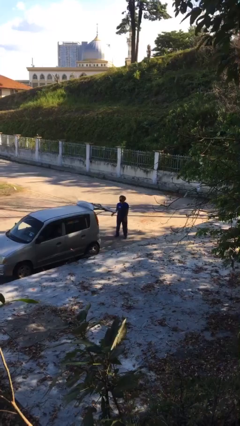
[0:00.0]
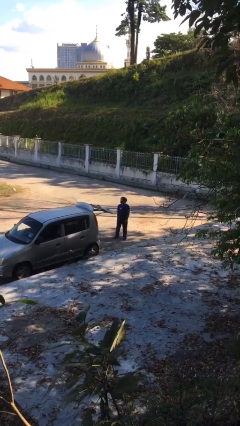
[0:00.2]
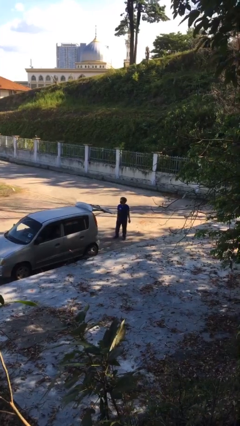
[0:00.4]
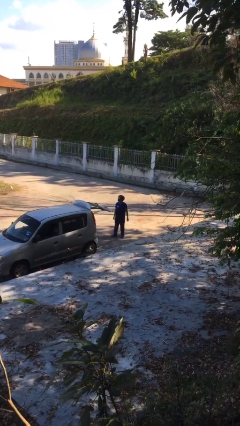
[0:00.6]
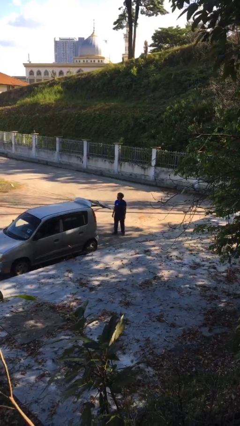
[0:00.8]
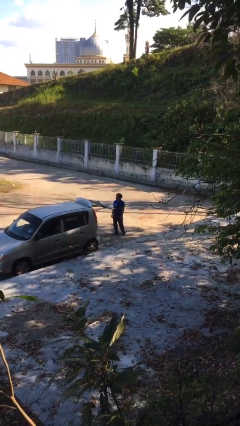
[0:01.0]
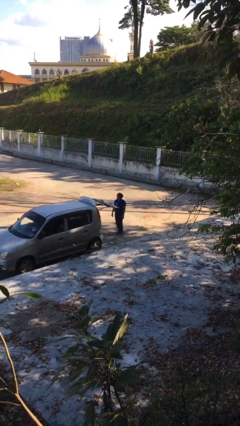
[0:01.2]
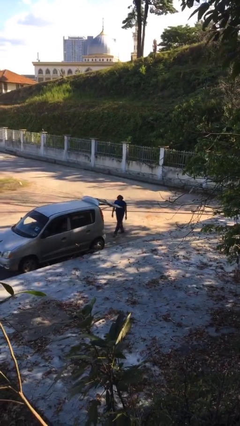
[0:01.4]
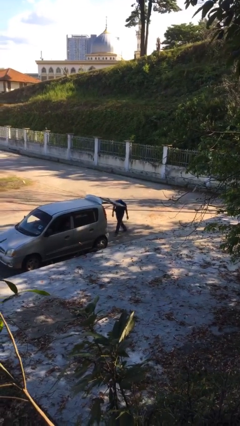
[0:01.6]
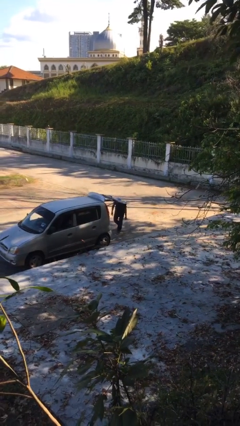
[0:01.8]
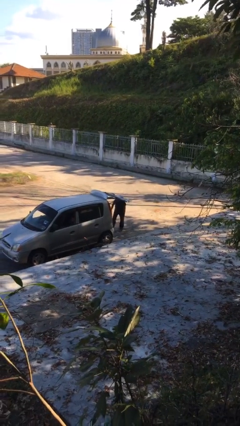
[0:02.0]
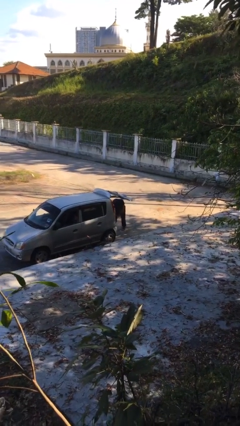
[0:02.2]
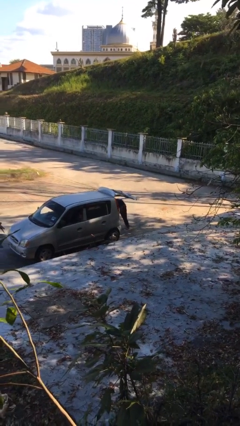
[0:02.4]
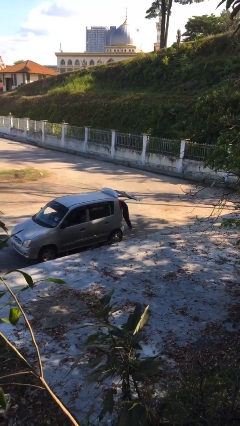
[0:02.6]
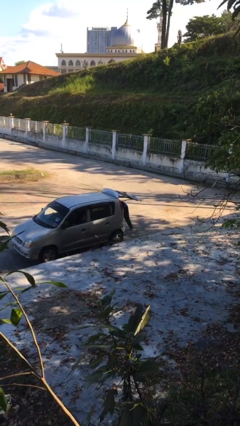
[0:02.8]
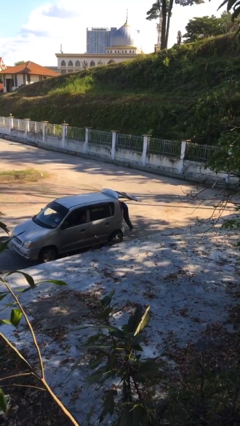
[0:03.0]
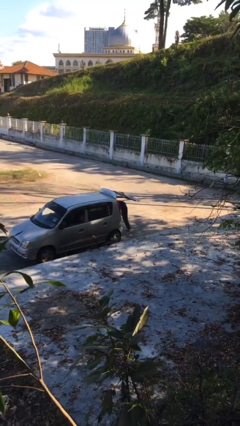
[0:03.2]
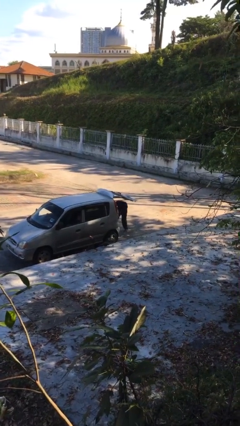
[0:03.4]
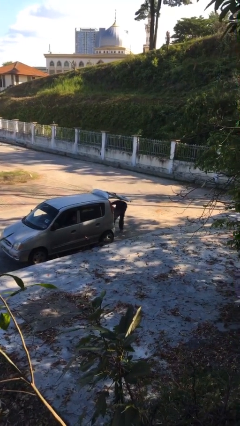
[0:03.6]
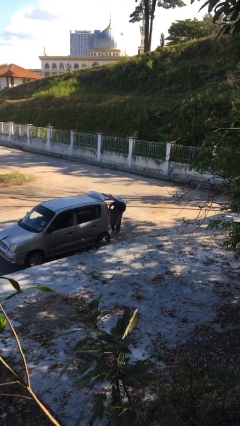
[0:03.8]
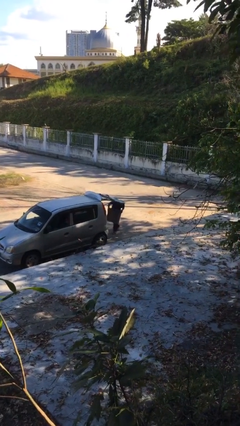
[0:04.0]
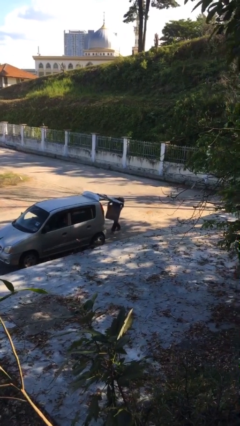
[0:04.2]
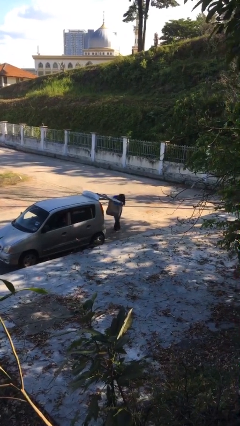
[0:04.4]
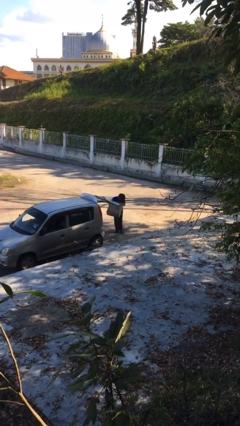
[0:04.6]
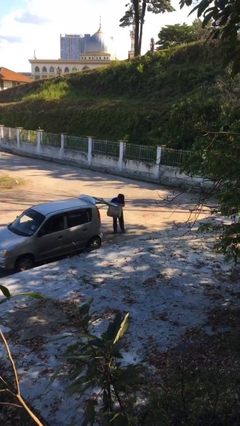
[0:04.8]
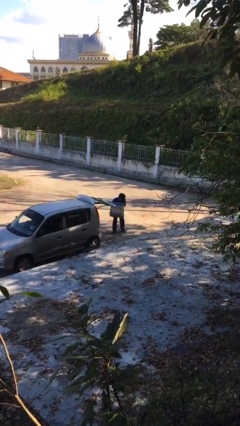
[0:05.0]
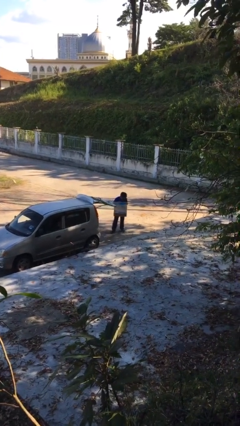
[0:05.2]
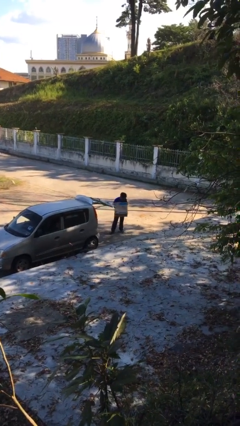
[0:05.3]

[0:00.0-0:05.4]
person unloads car

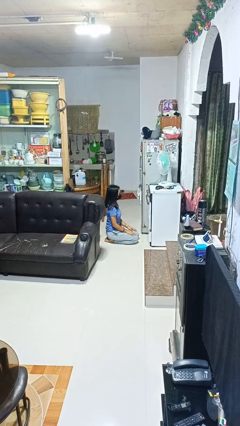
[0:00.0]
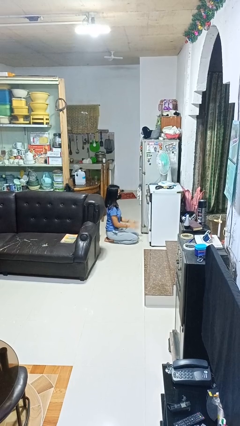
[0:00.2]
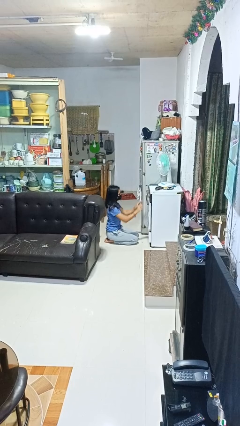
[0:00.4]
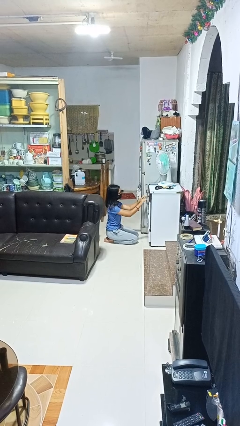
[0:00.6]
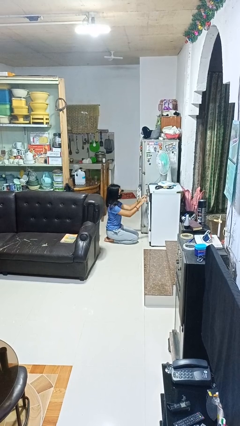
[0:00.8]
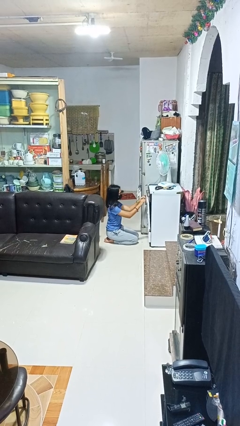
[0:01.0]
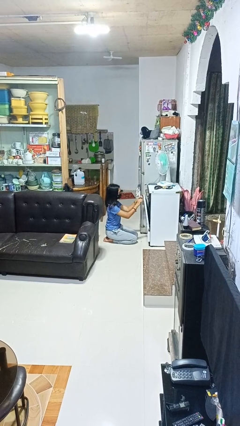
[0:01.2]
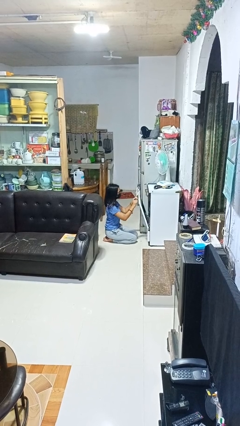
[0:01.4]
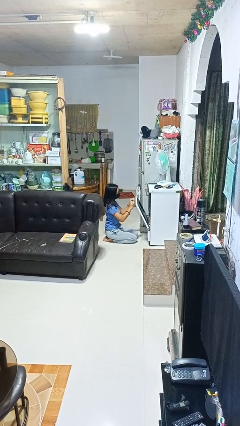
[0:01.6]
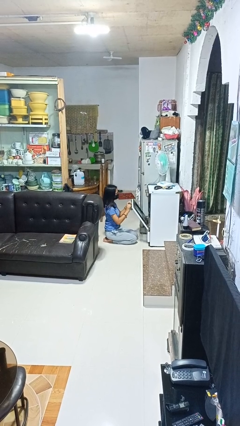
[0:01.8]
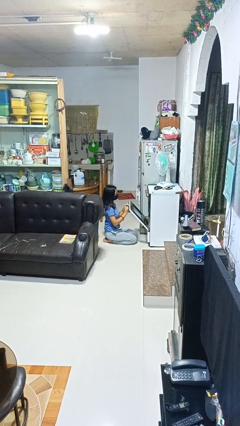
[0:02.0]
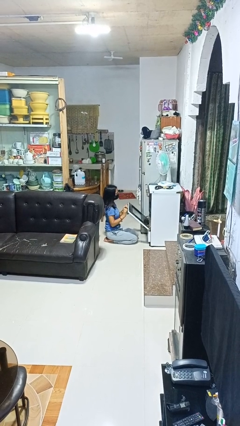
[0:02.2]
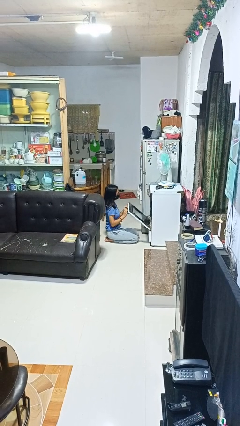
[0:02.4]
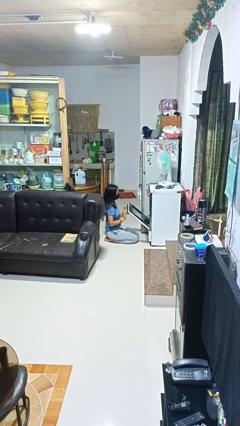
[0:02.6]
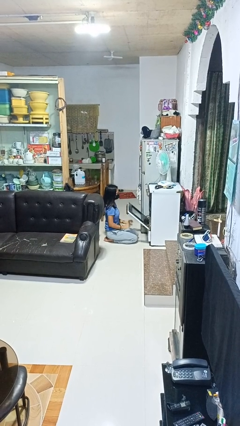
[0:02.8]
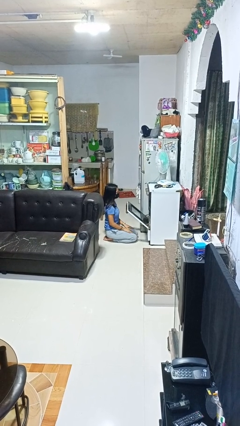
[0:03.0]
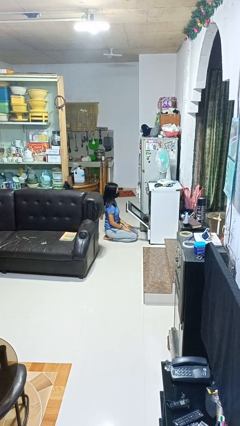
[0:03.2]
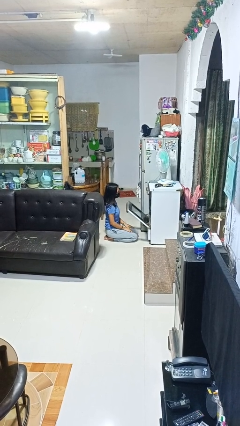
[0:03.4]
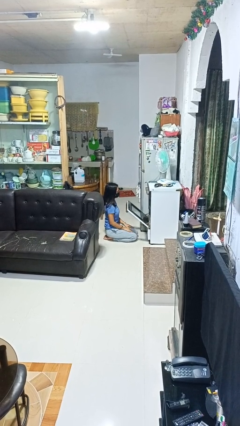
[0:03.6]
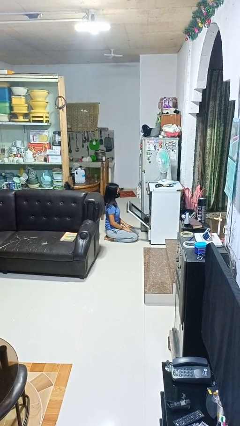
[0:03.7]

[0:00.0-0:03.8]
person opens oven door

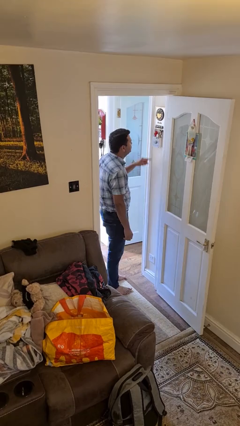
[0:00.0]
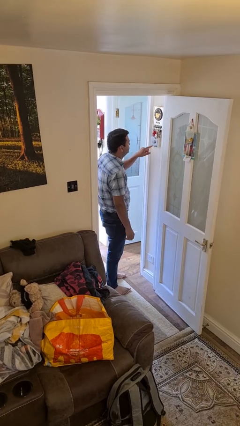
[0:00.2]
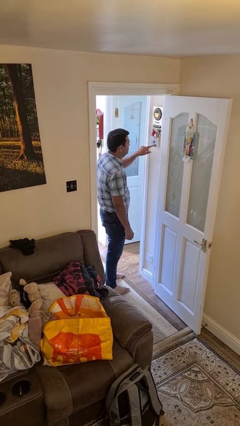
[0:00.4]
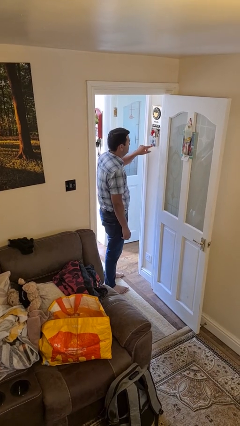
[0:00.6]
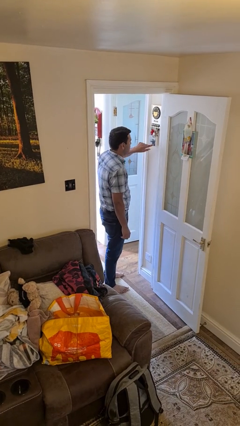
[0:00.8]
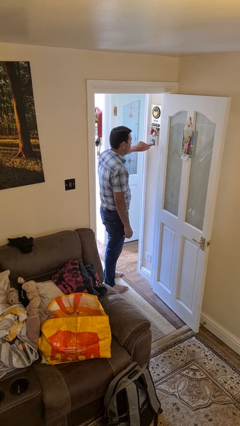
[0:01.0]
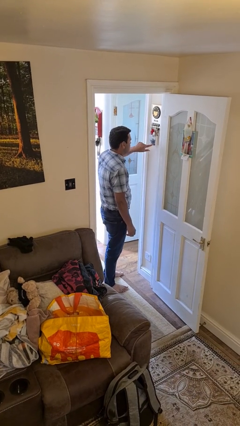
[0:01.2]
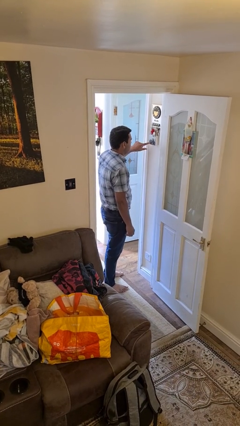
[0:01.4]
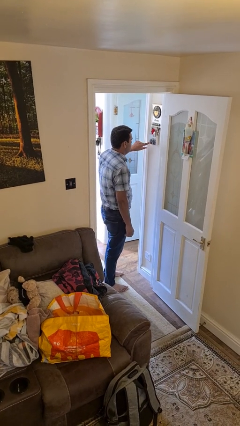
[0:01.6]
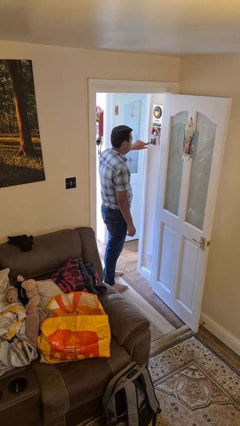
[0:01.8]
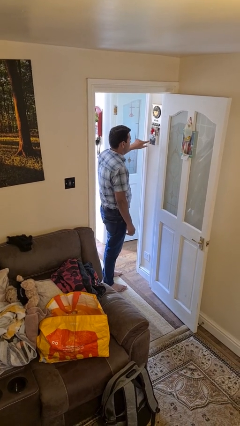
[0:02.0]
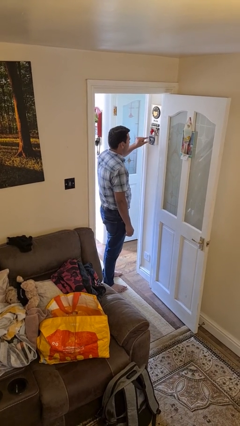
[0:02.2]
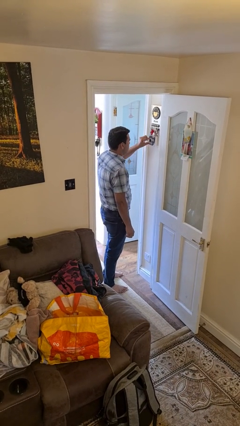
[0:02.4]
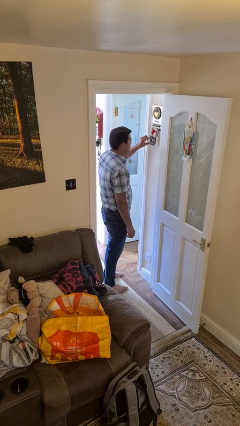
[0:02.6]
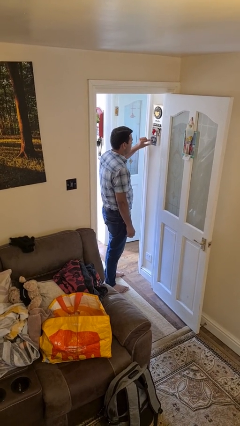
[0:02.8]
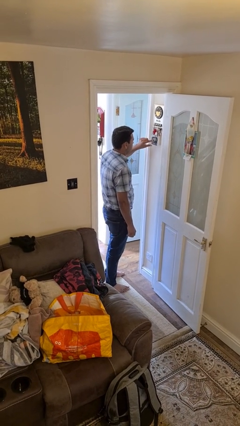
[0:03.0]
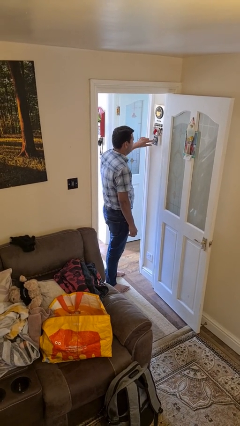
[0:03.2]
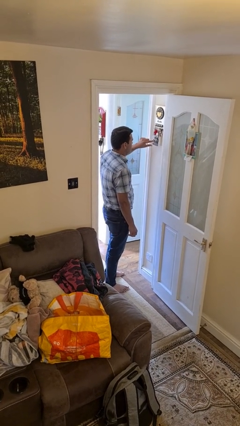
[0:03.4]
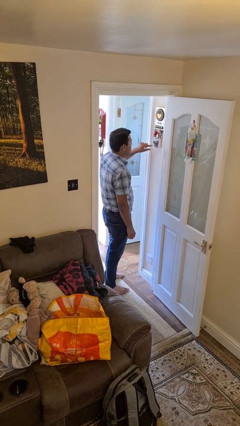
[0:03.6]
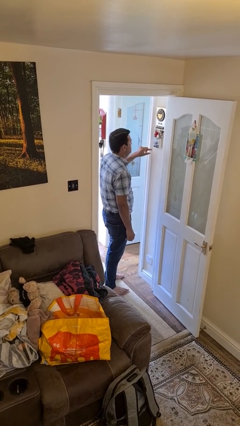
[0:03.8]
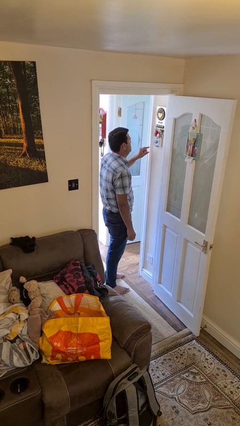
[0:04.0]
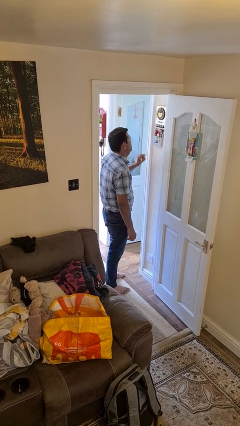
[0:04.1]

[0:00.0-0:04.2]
person adjusts thermostat

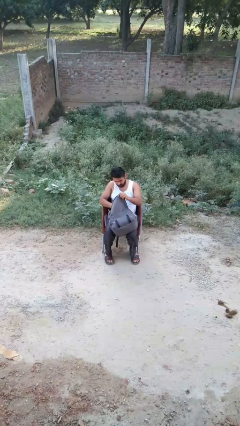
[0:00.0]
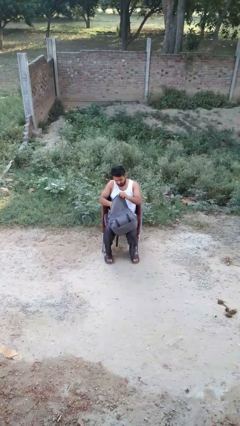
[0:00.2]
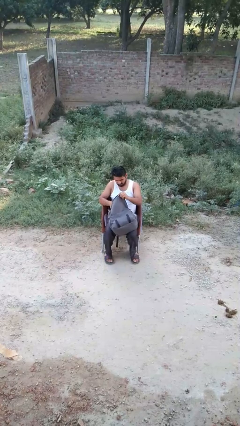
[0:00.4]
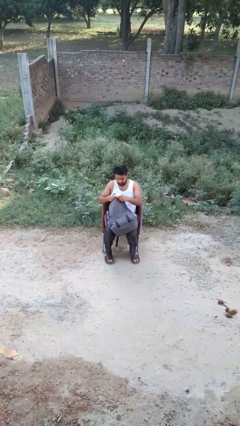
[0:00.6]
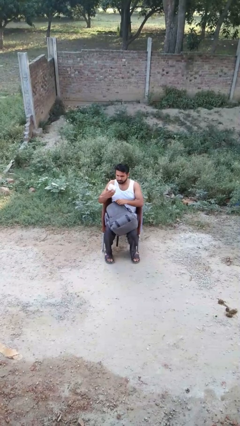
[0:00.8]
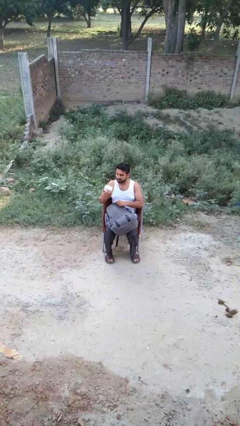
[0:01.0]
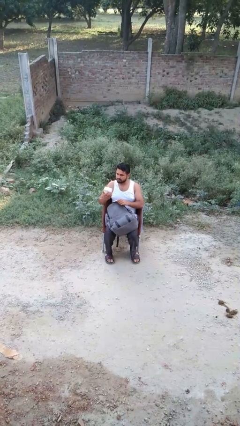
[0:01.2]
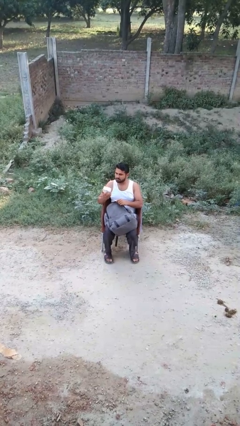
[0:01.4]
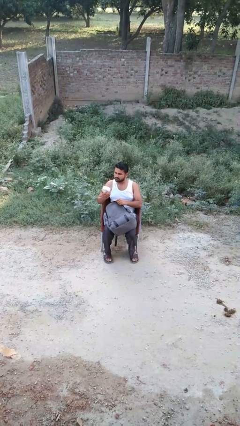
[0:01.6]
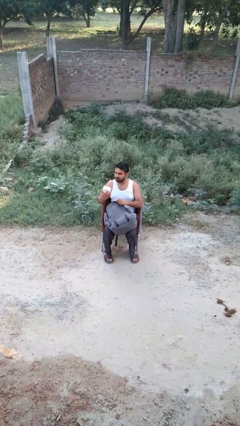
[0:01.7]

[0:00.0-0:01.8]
person takes object from backpack

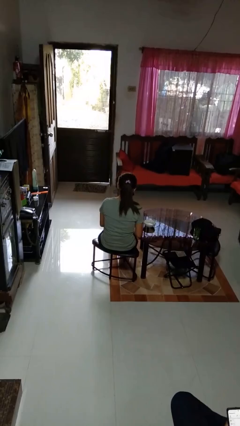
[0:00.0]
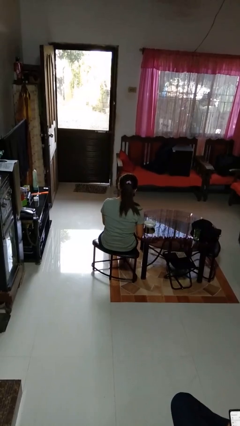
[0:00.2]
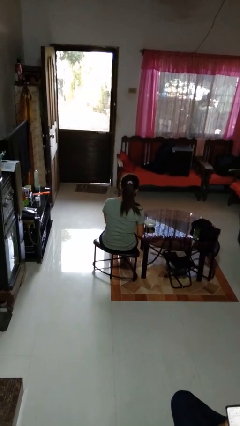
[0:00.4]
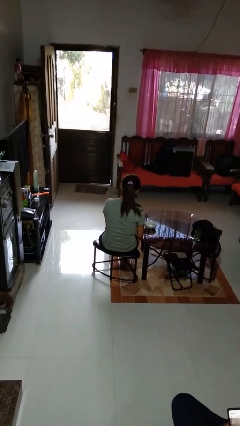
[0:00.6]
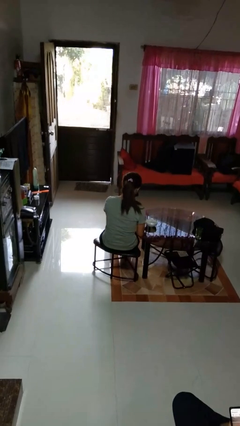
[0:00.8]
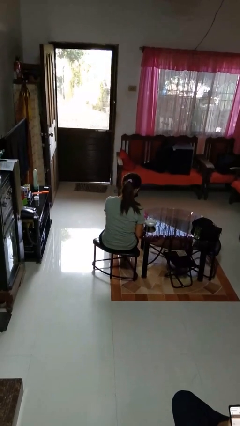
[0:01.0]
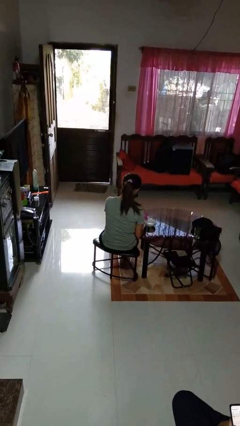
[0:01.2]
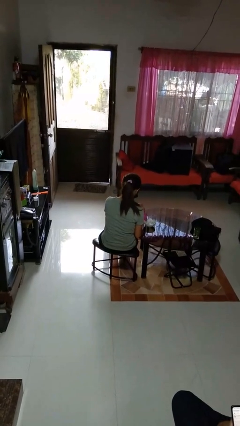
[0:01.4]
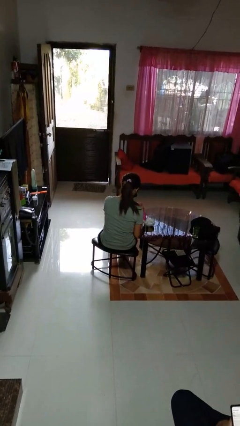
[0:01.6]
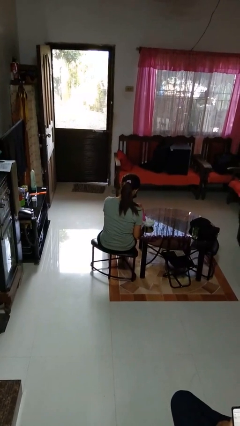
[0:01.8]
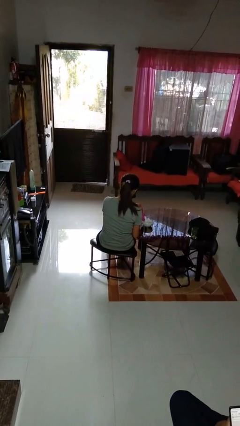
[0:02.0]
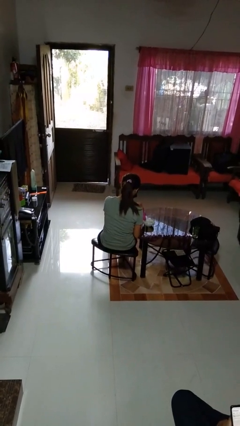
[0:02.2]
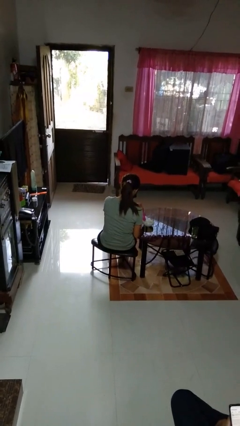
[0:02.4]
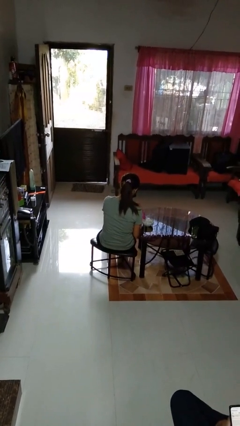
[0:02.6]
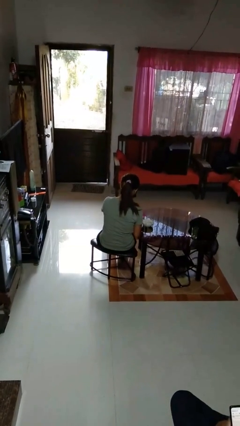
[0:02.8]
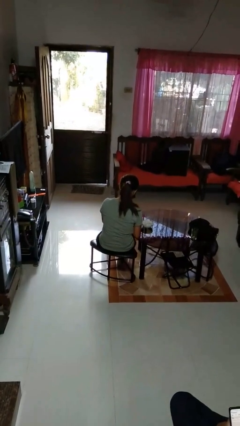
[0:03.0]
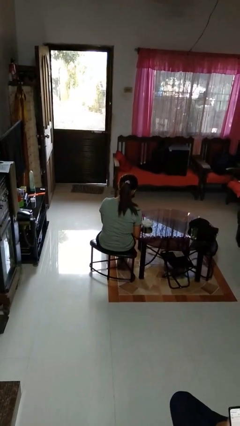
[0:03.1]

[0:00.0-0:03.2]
person pours into bowl
